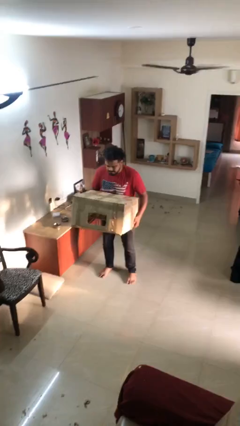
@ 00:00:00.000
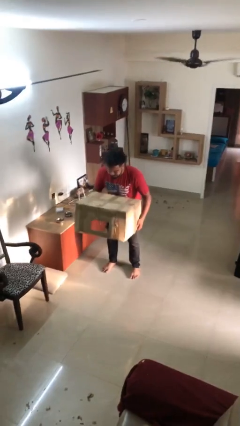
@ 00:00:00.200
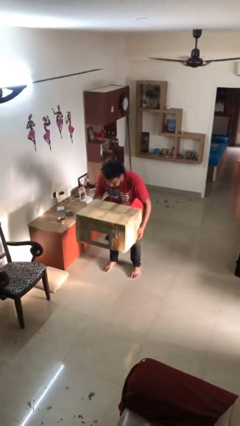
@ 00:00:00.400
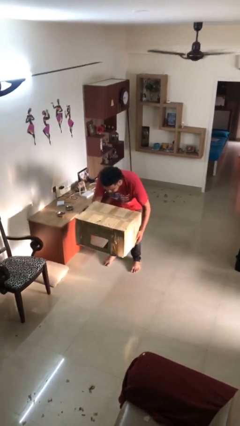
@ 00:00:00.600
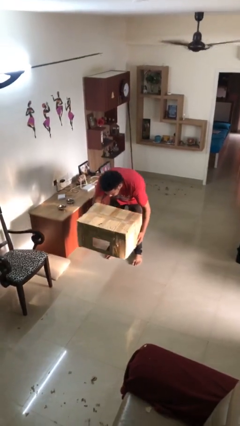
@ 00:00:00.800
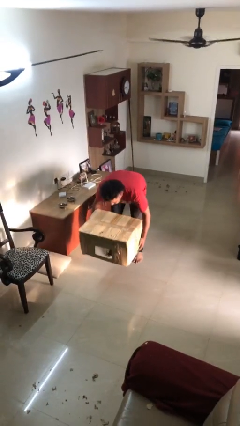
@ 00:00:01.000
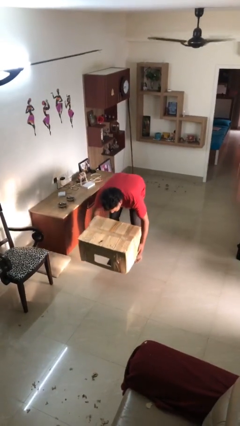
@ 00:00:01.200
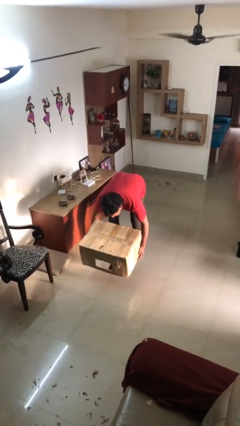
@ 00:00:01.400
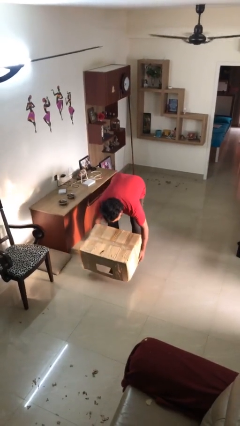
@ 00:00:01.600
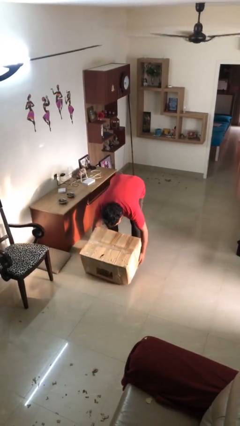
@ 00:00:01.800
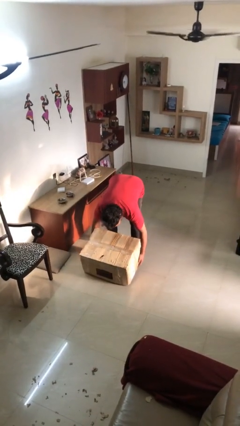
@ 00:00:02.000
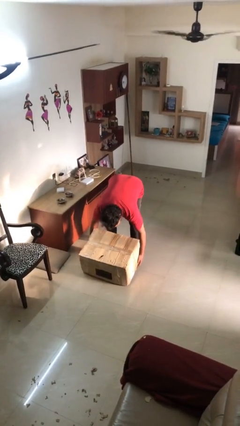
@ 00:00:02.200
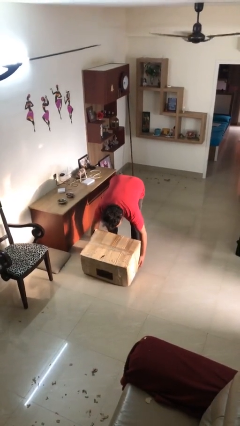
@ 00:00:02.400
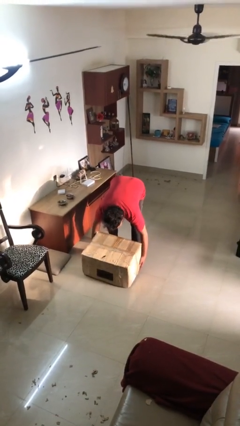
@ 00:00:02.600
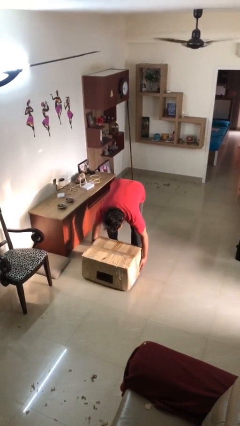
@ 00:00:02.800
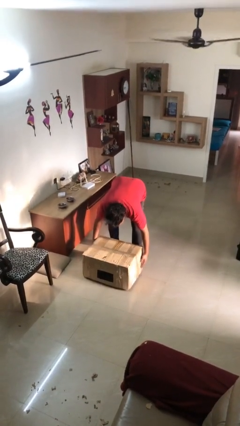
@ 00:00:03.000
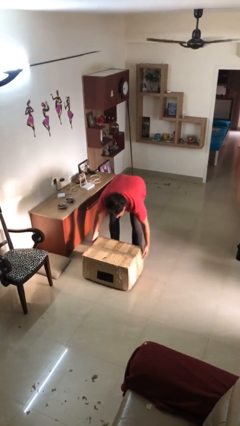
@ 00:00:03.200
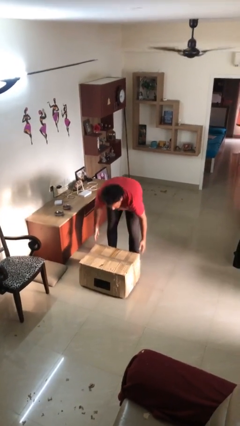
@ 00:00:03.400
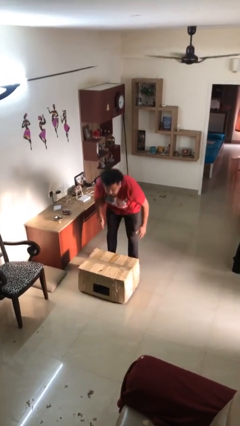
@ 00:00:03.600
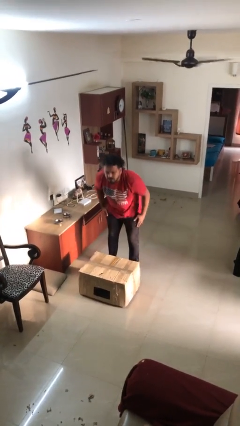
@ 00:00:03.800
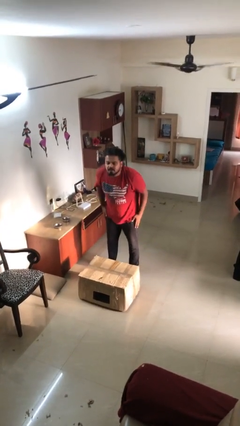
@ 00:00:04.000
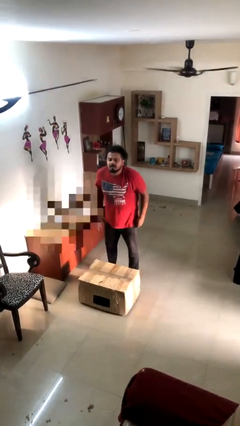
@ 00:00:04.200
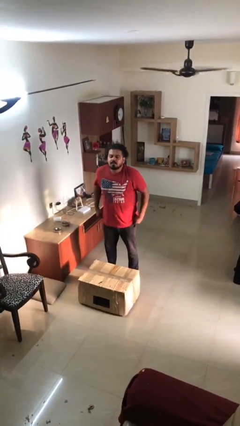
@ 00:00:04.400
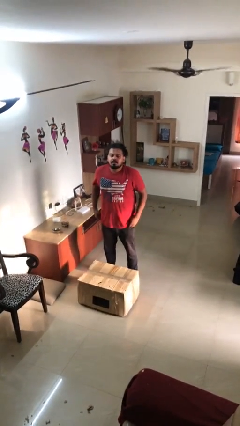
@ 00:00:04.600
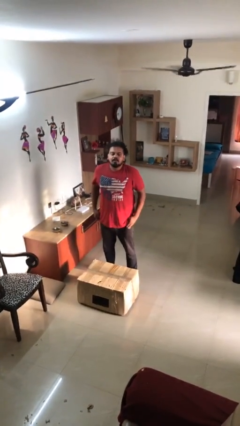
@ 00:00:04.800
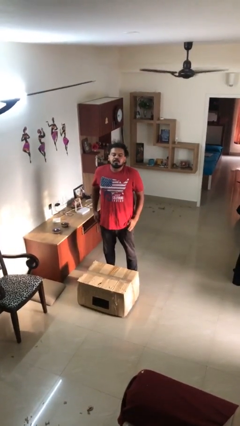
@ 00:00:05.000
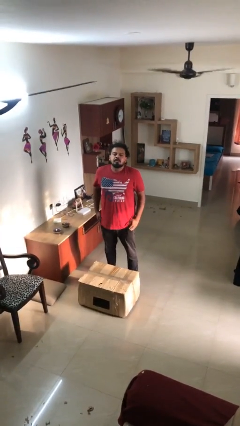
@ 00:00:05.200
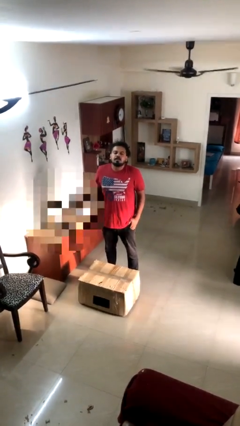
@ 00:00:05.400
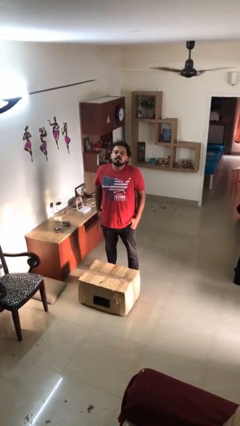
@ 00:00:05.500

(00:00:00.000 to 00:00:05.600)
person puts down object on floor

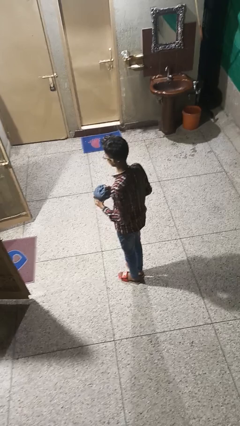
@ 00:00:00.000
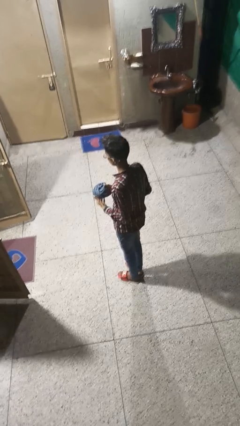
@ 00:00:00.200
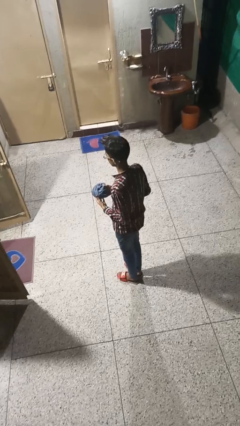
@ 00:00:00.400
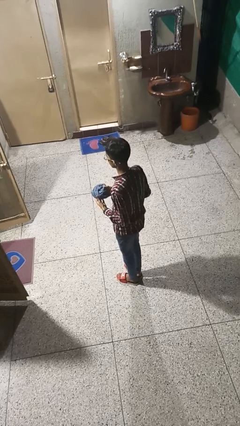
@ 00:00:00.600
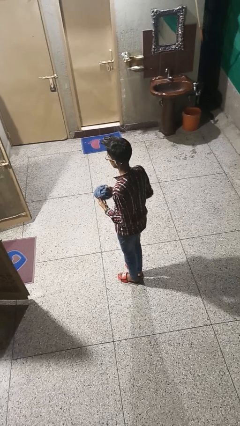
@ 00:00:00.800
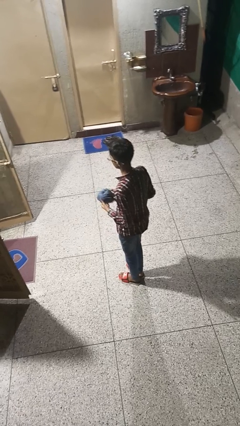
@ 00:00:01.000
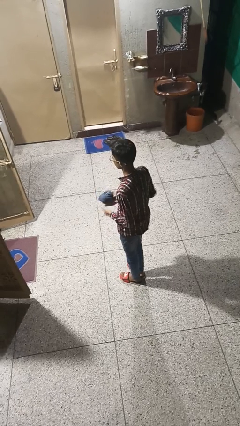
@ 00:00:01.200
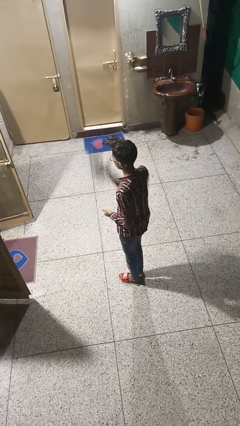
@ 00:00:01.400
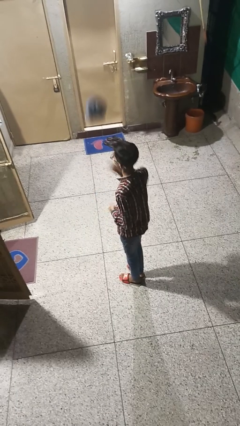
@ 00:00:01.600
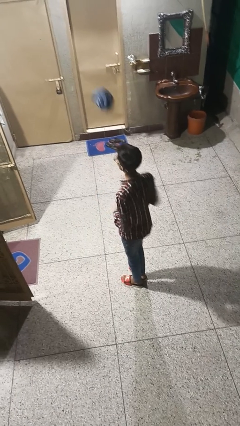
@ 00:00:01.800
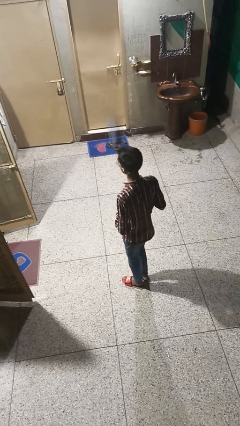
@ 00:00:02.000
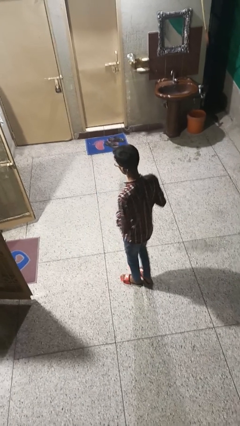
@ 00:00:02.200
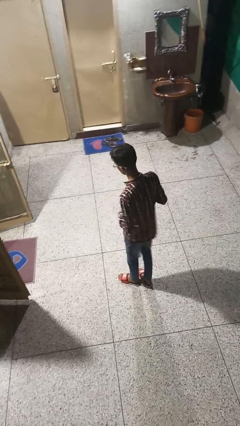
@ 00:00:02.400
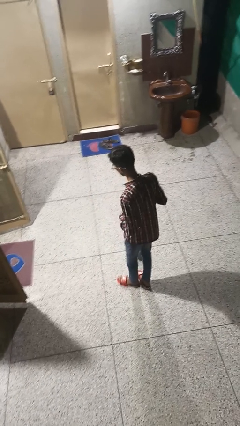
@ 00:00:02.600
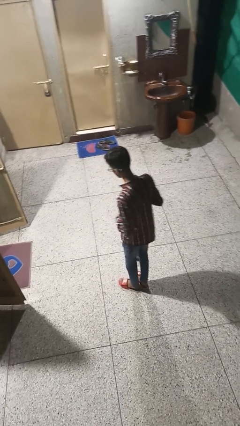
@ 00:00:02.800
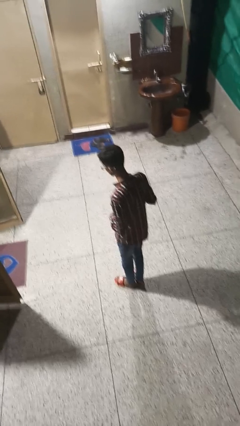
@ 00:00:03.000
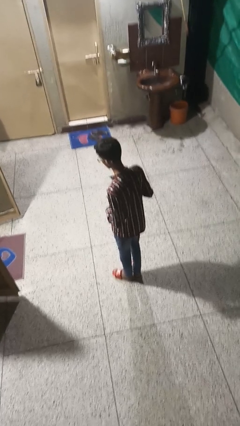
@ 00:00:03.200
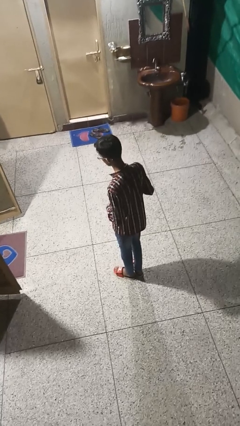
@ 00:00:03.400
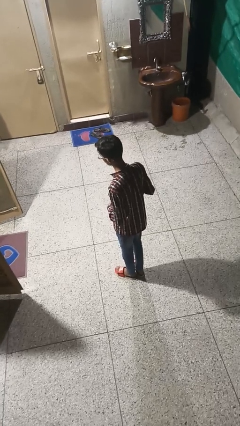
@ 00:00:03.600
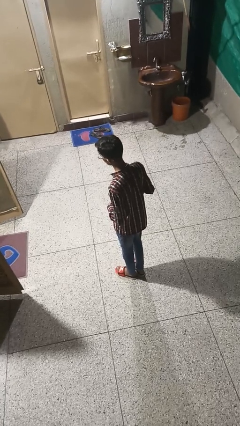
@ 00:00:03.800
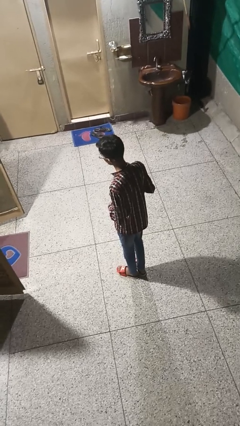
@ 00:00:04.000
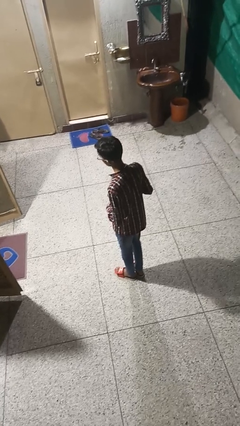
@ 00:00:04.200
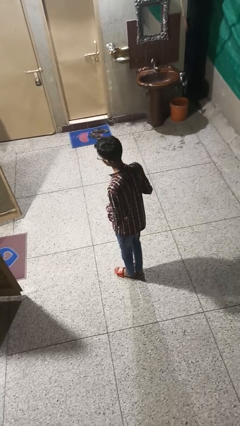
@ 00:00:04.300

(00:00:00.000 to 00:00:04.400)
person throws object into air

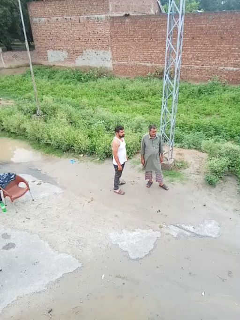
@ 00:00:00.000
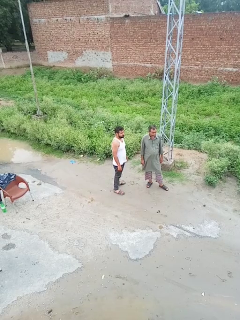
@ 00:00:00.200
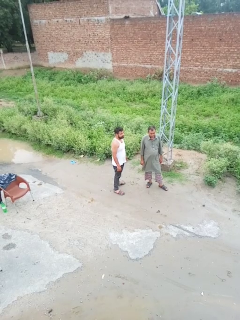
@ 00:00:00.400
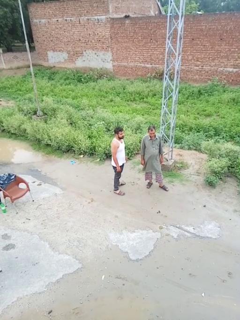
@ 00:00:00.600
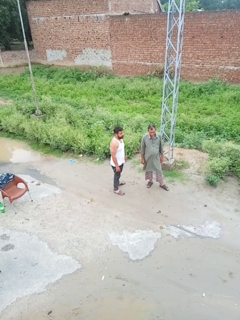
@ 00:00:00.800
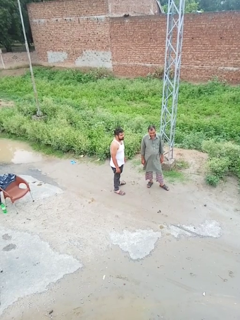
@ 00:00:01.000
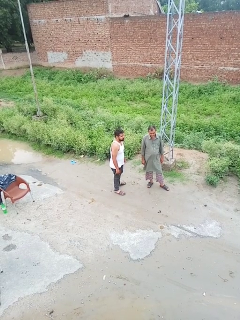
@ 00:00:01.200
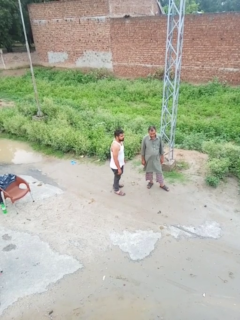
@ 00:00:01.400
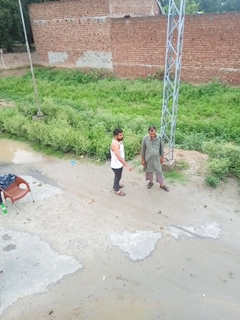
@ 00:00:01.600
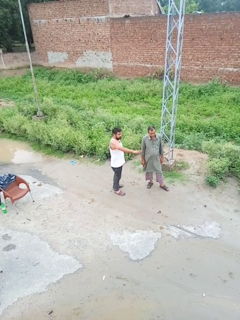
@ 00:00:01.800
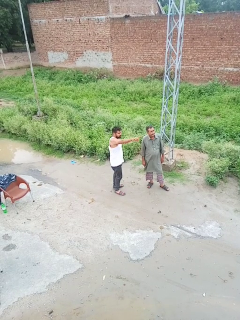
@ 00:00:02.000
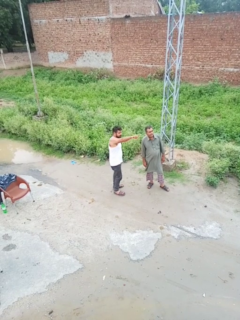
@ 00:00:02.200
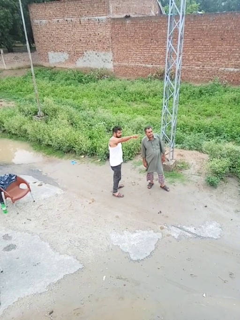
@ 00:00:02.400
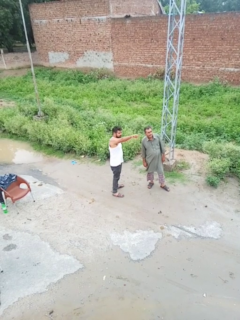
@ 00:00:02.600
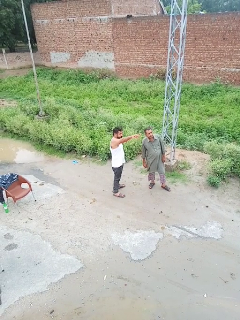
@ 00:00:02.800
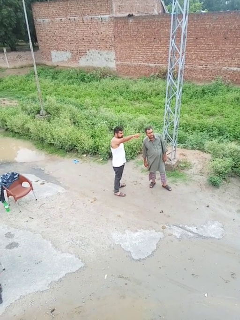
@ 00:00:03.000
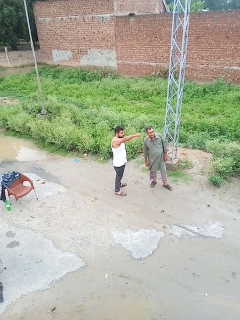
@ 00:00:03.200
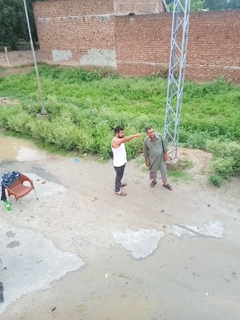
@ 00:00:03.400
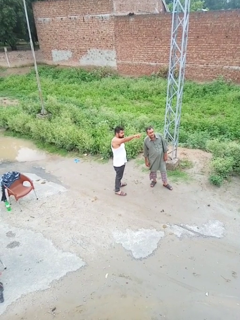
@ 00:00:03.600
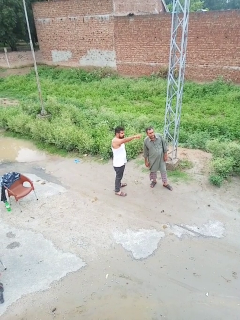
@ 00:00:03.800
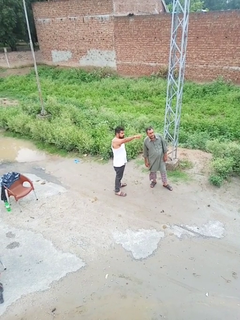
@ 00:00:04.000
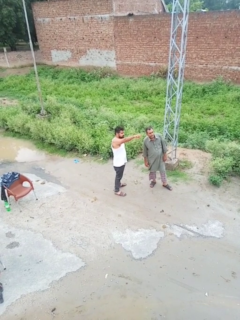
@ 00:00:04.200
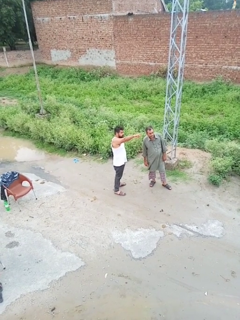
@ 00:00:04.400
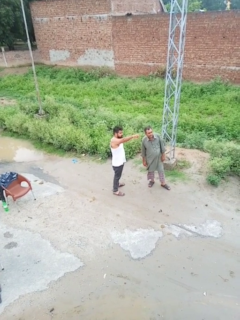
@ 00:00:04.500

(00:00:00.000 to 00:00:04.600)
person points at person

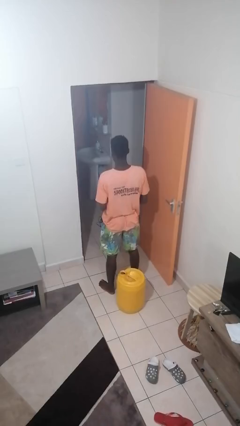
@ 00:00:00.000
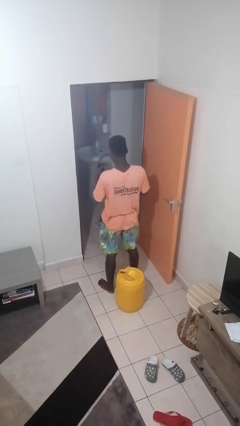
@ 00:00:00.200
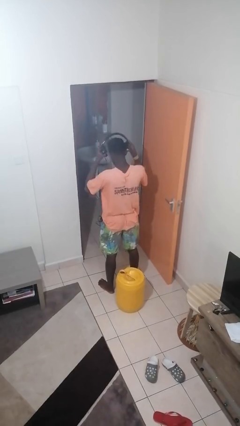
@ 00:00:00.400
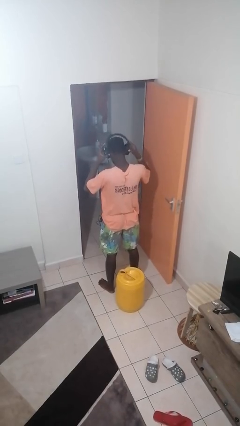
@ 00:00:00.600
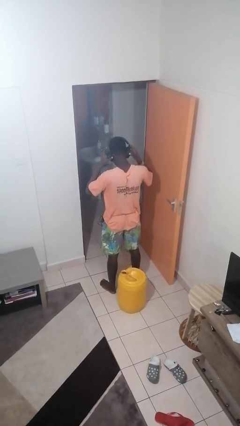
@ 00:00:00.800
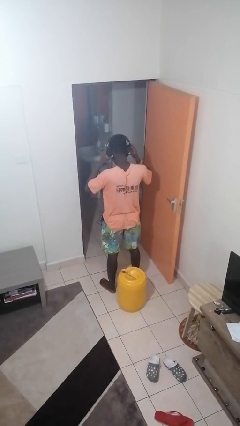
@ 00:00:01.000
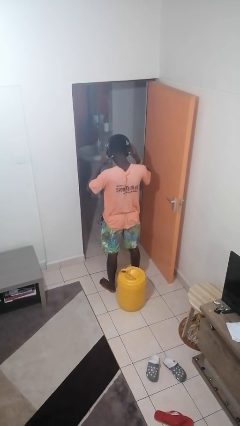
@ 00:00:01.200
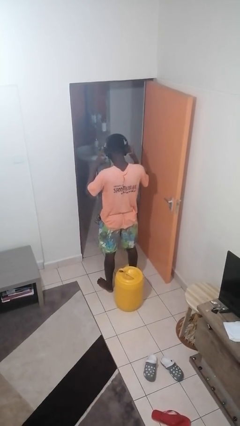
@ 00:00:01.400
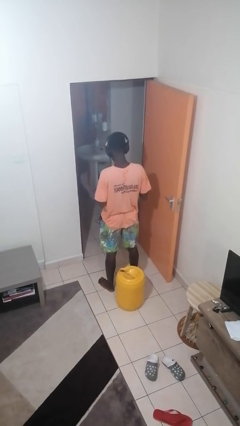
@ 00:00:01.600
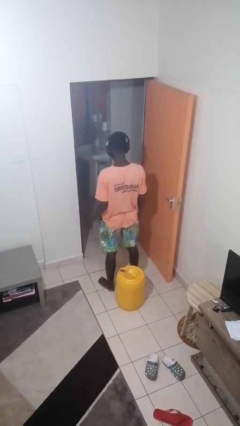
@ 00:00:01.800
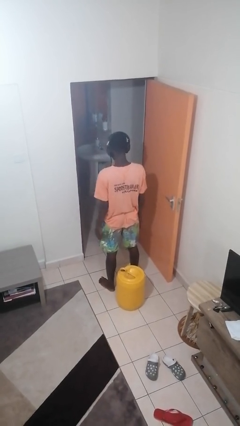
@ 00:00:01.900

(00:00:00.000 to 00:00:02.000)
person puts on headphones

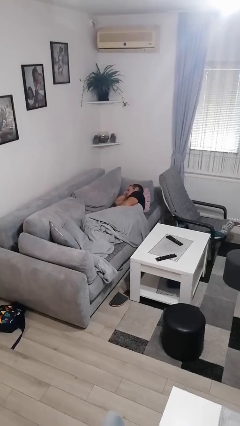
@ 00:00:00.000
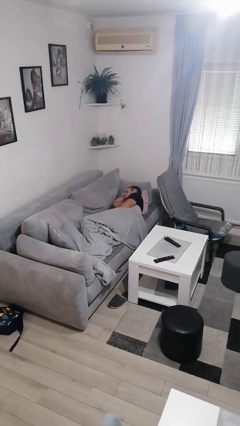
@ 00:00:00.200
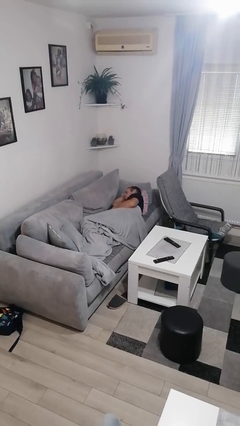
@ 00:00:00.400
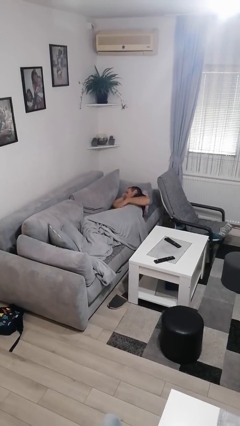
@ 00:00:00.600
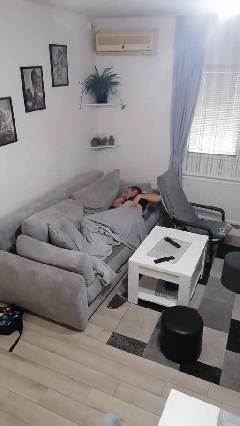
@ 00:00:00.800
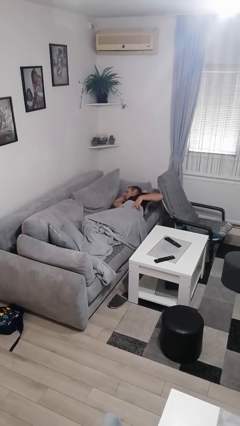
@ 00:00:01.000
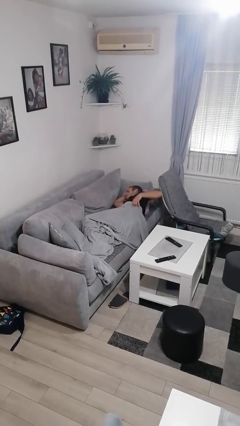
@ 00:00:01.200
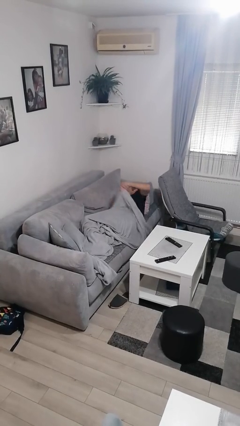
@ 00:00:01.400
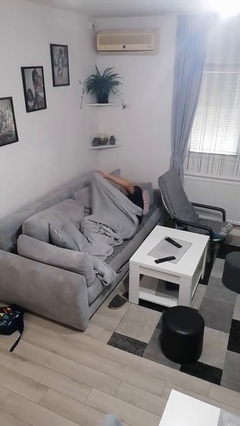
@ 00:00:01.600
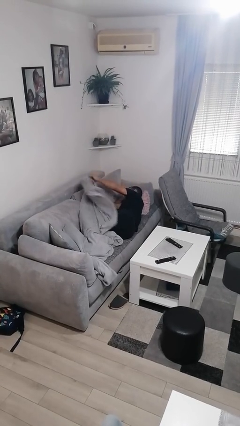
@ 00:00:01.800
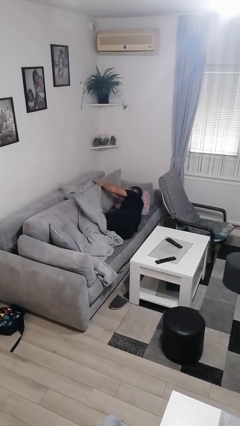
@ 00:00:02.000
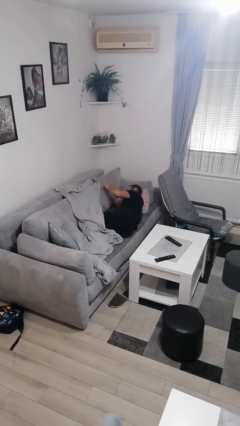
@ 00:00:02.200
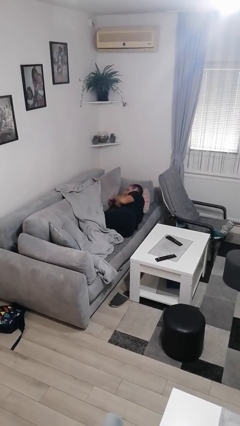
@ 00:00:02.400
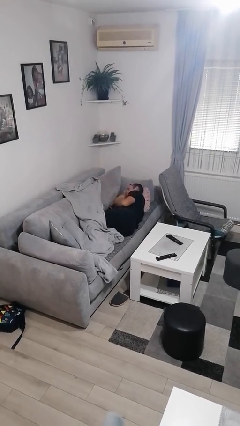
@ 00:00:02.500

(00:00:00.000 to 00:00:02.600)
person uncovers with blanket
